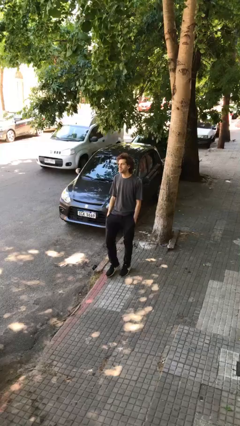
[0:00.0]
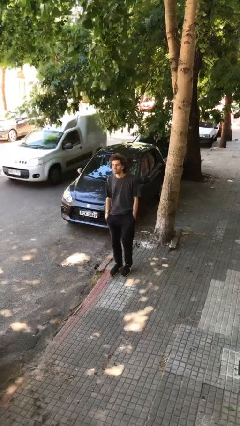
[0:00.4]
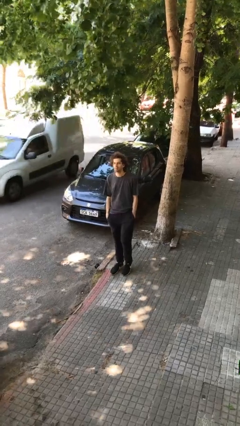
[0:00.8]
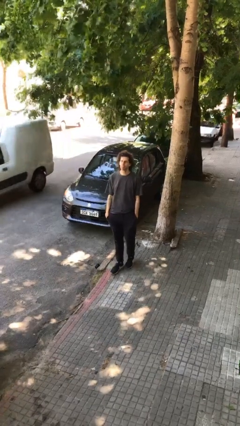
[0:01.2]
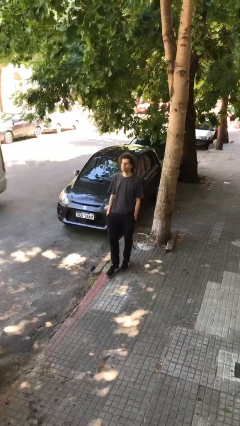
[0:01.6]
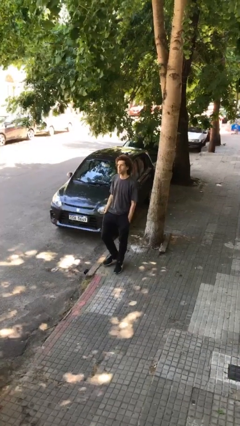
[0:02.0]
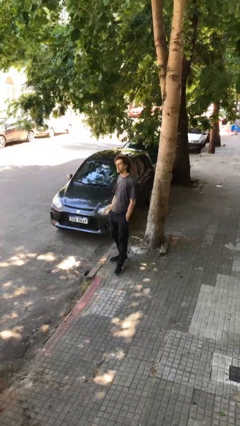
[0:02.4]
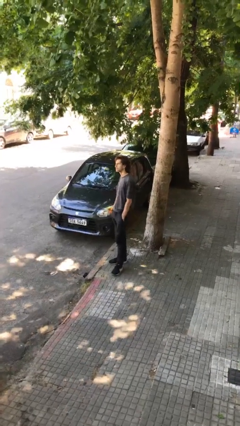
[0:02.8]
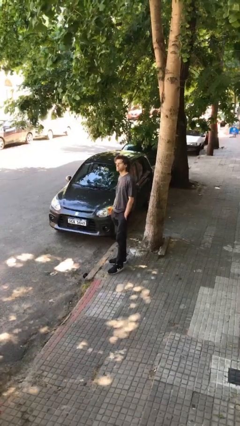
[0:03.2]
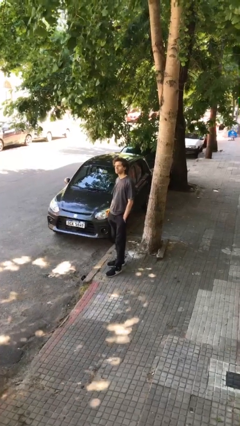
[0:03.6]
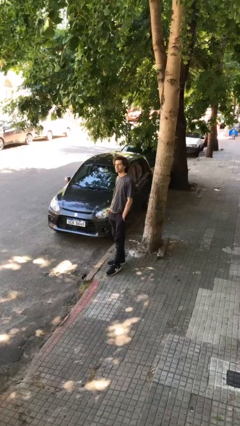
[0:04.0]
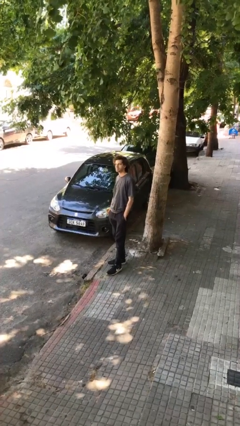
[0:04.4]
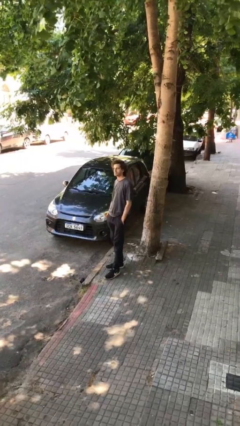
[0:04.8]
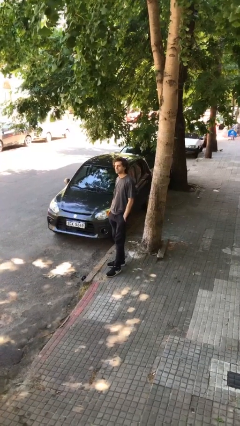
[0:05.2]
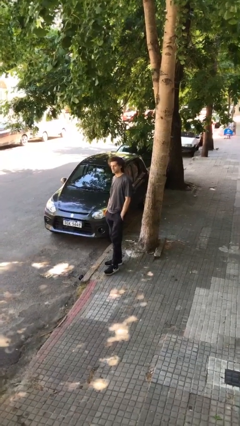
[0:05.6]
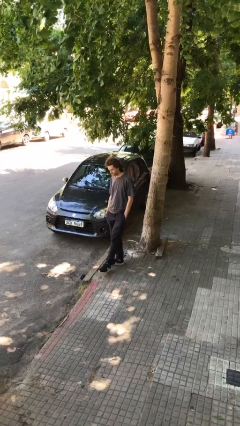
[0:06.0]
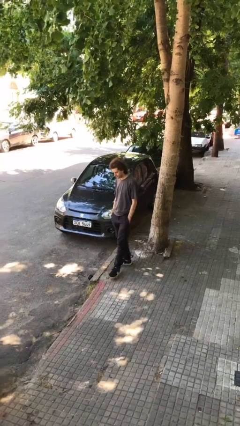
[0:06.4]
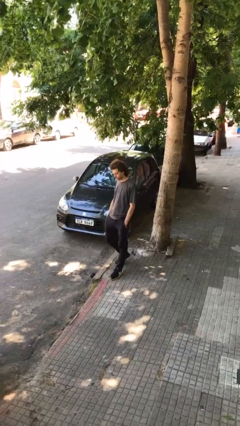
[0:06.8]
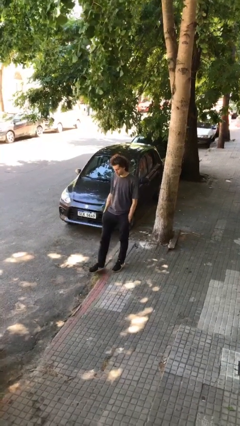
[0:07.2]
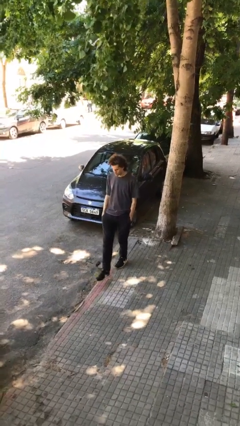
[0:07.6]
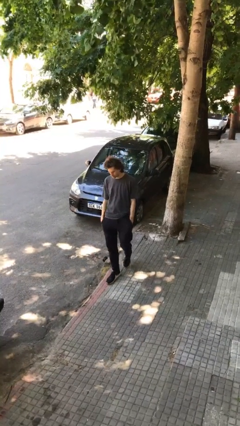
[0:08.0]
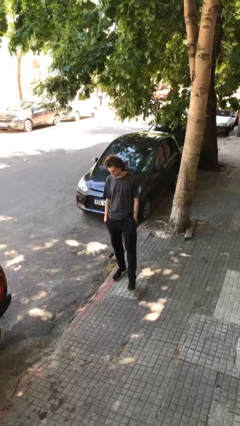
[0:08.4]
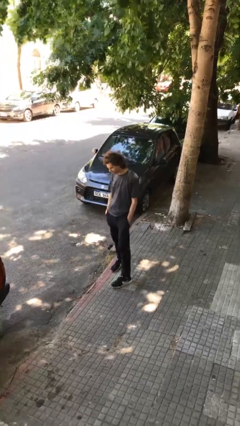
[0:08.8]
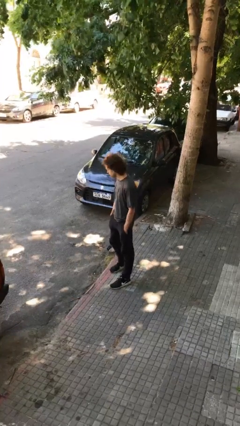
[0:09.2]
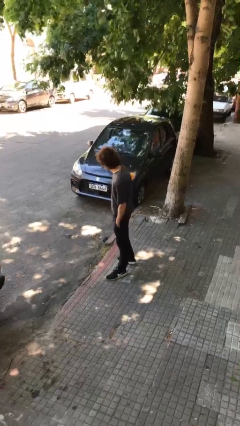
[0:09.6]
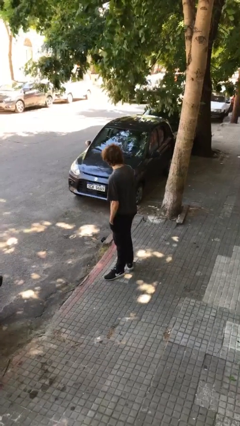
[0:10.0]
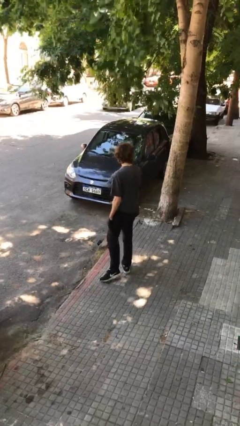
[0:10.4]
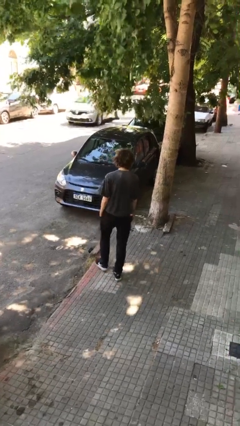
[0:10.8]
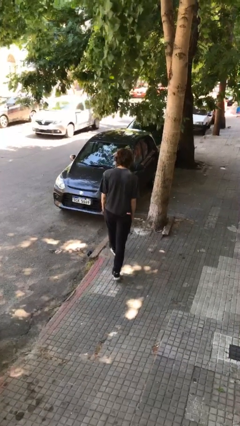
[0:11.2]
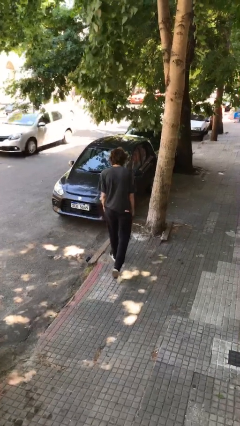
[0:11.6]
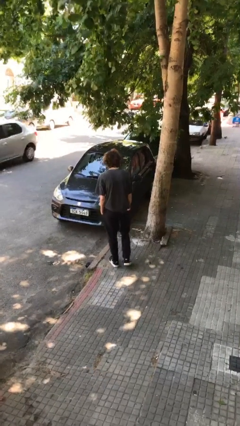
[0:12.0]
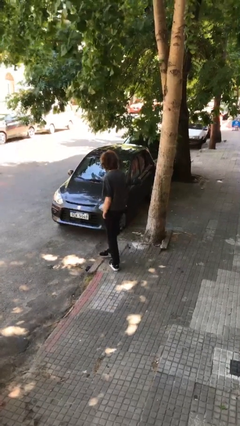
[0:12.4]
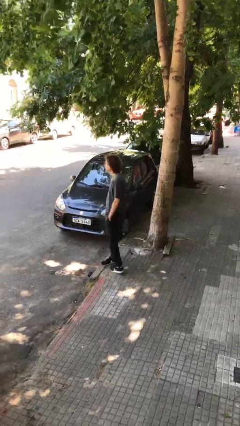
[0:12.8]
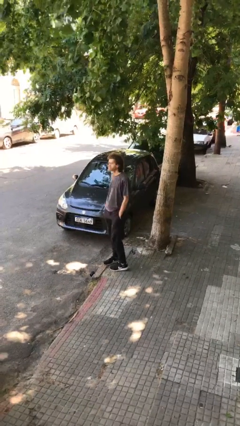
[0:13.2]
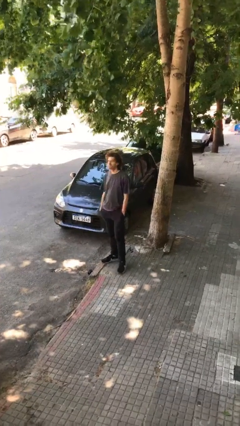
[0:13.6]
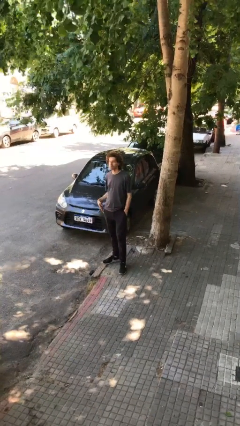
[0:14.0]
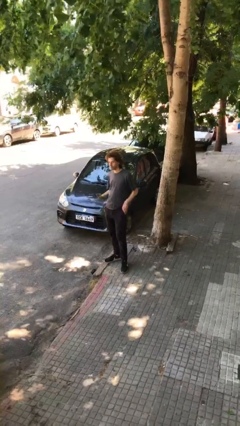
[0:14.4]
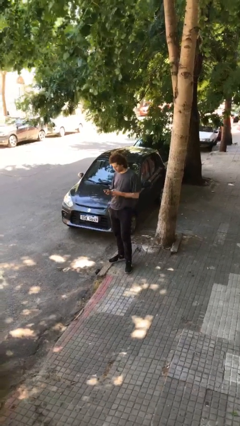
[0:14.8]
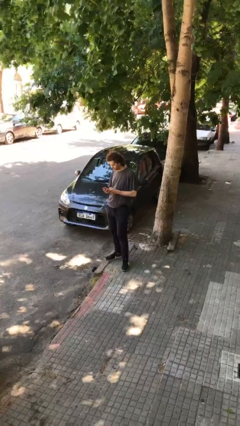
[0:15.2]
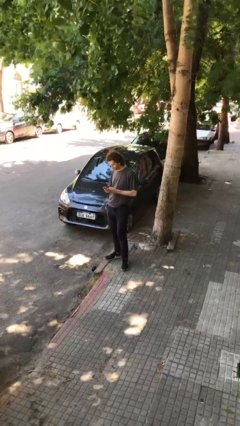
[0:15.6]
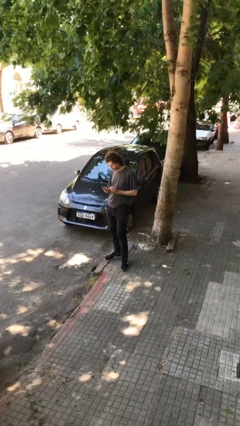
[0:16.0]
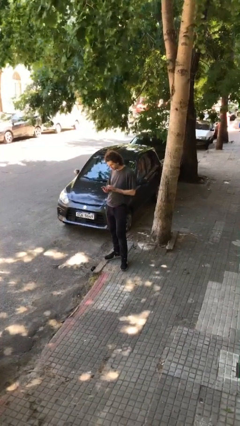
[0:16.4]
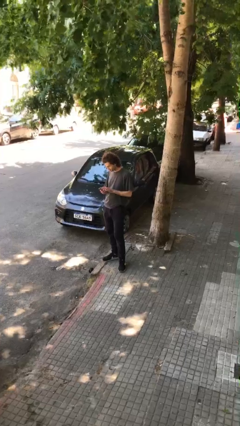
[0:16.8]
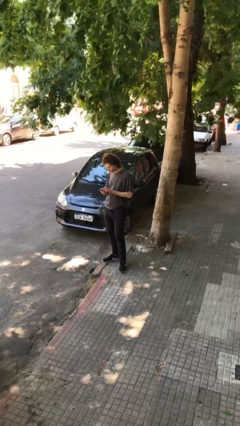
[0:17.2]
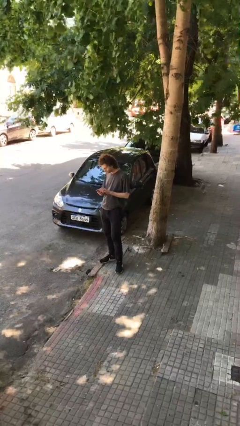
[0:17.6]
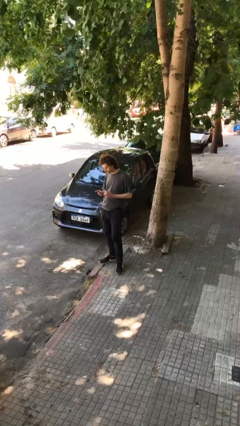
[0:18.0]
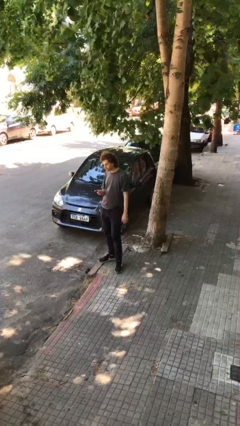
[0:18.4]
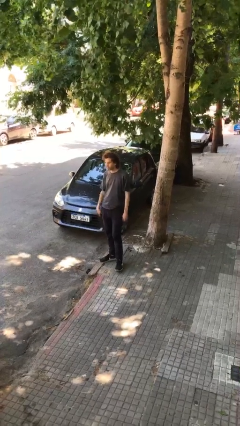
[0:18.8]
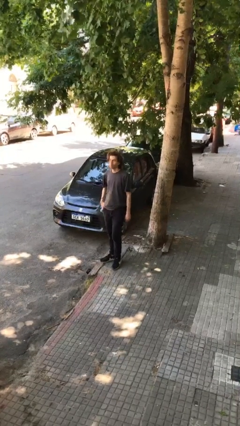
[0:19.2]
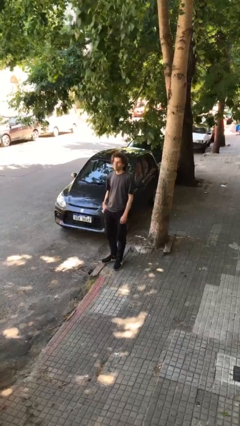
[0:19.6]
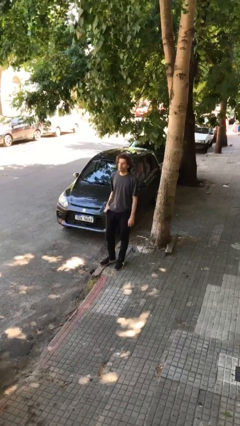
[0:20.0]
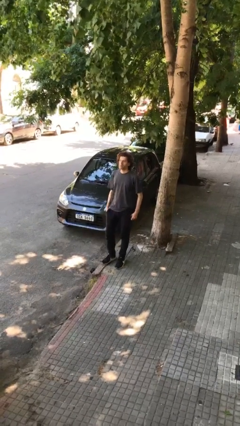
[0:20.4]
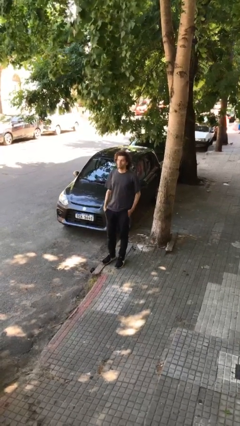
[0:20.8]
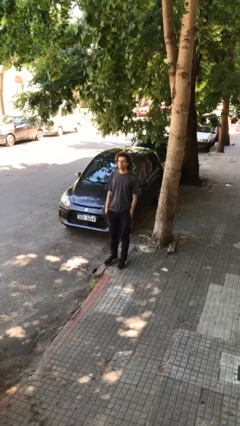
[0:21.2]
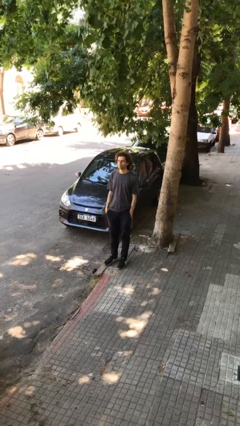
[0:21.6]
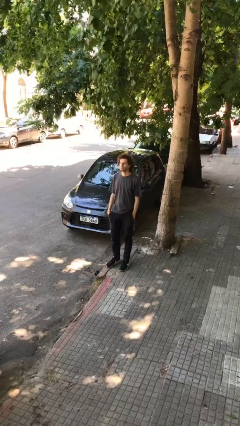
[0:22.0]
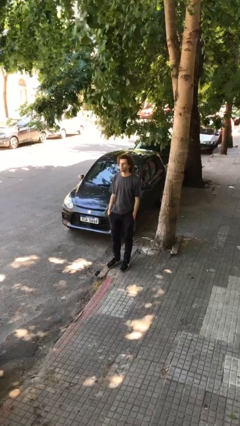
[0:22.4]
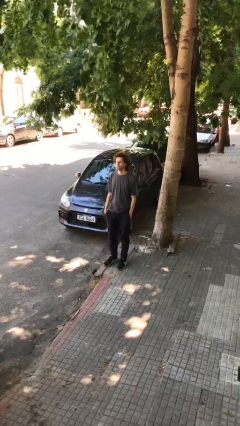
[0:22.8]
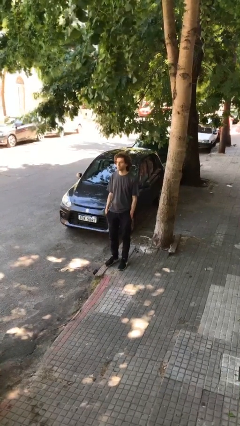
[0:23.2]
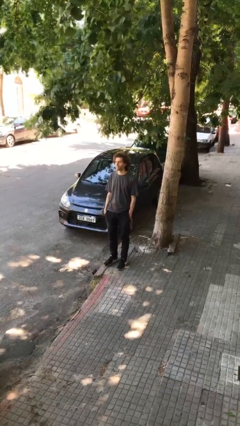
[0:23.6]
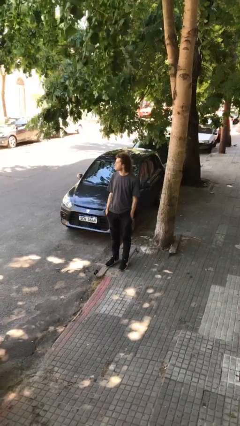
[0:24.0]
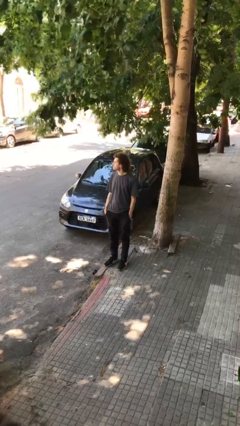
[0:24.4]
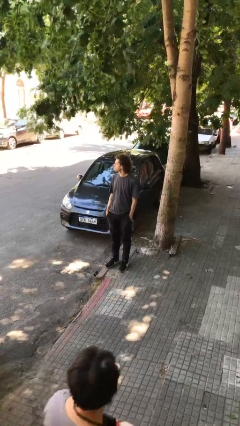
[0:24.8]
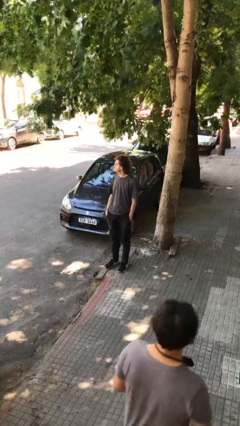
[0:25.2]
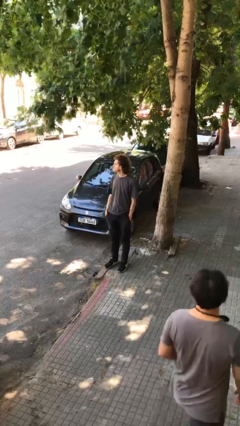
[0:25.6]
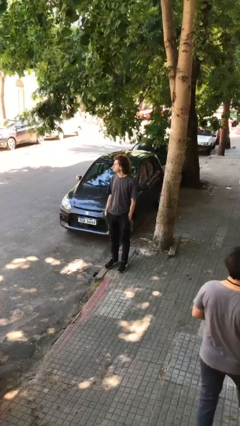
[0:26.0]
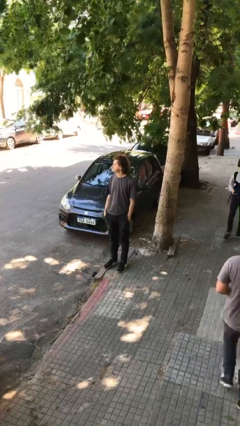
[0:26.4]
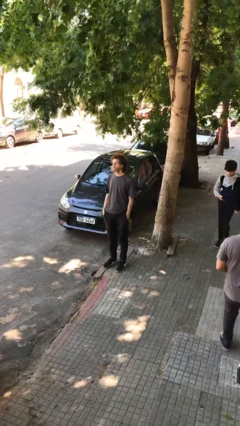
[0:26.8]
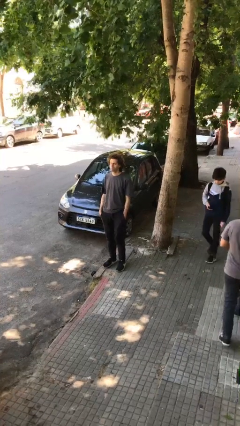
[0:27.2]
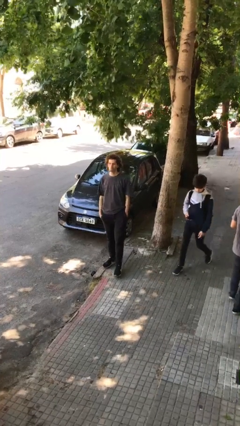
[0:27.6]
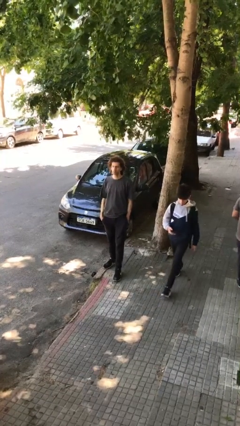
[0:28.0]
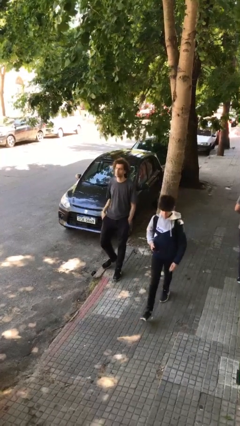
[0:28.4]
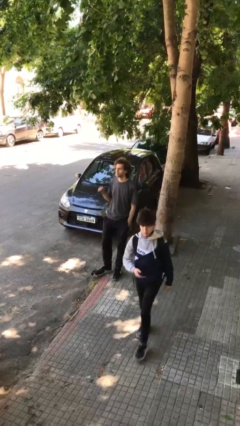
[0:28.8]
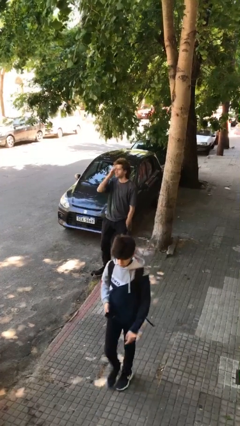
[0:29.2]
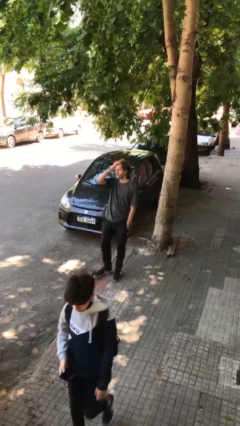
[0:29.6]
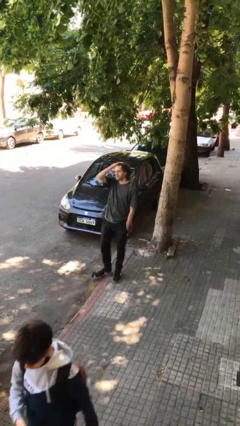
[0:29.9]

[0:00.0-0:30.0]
person walks

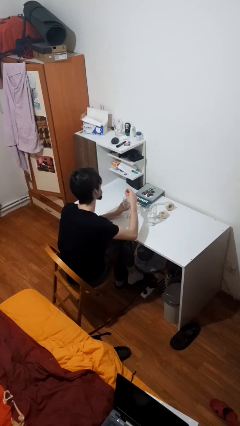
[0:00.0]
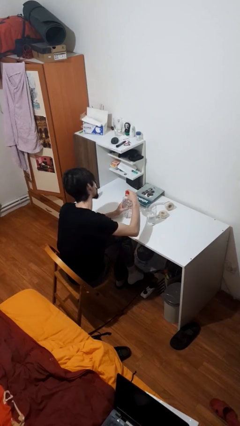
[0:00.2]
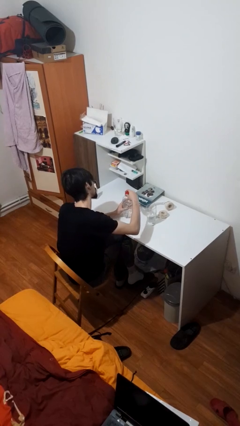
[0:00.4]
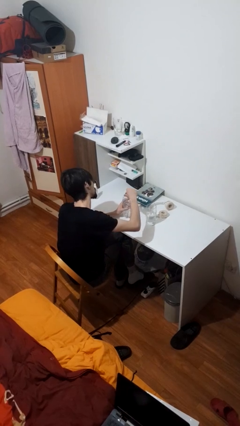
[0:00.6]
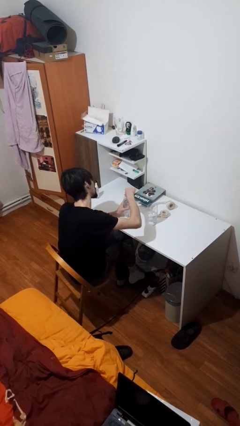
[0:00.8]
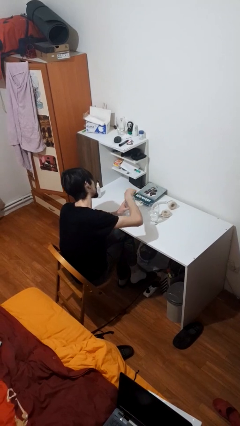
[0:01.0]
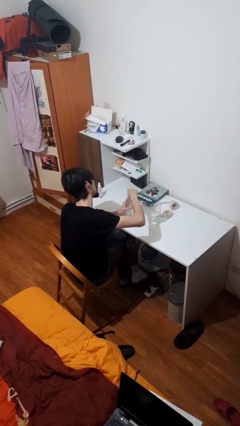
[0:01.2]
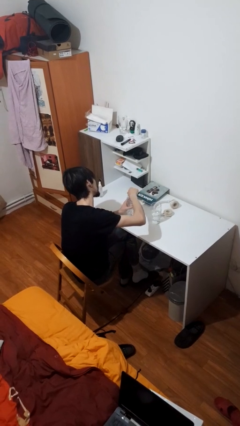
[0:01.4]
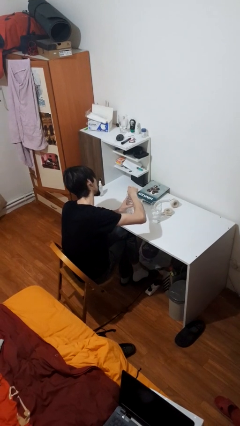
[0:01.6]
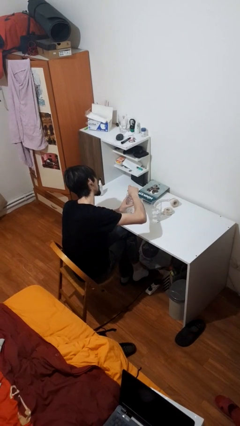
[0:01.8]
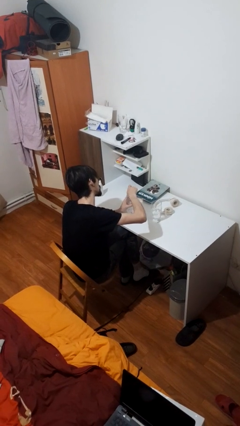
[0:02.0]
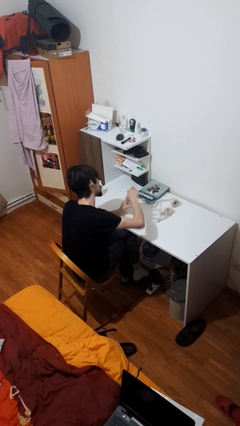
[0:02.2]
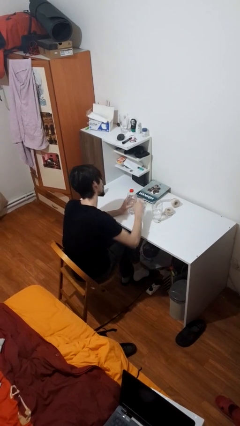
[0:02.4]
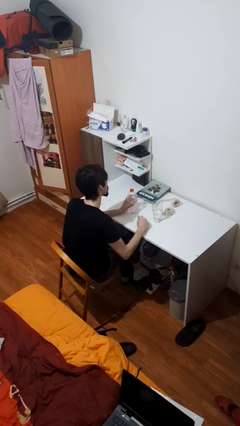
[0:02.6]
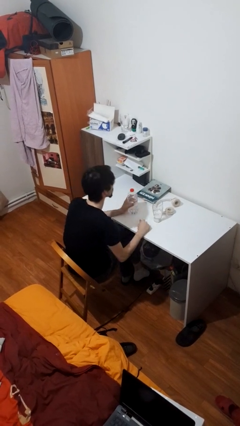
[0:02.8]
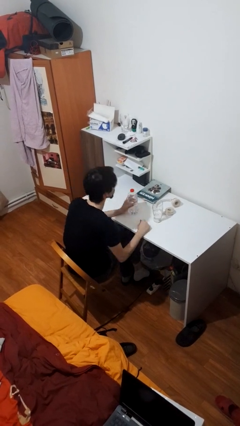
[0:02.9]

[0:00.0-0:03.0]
person screws lid to bottle
